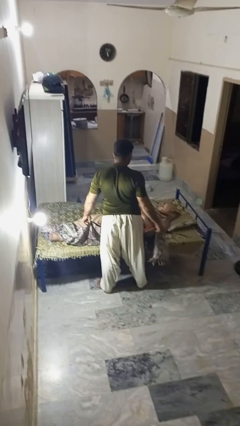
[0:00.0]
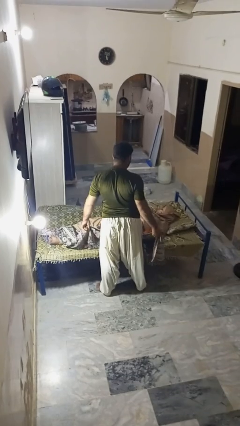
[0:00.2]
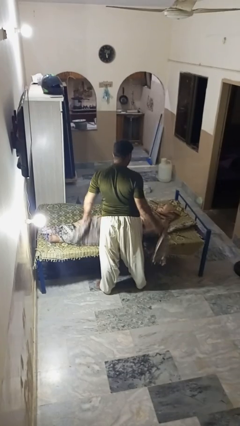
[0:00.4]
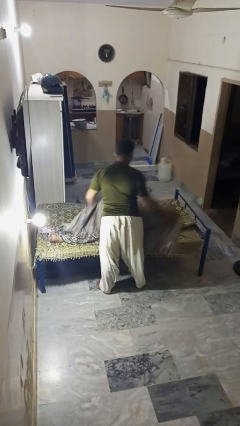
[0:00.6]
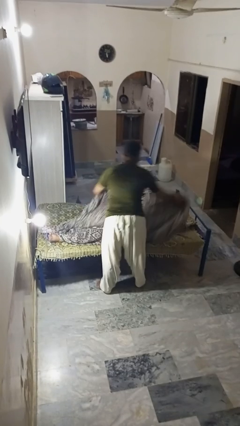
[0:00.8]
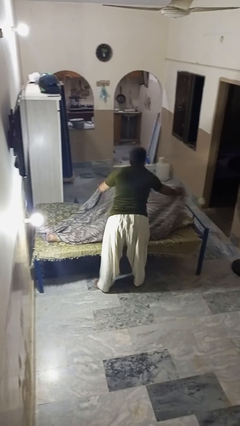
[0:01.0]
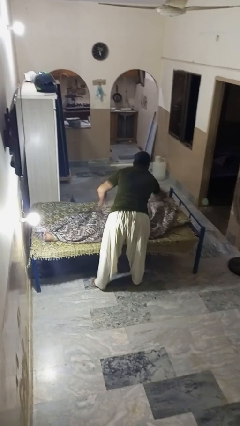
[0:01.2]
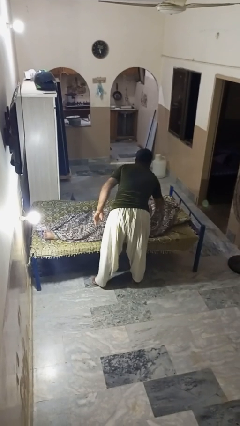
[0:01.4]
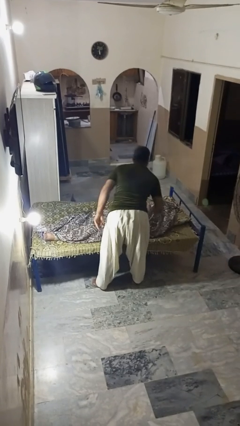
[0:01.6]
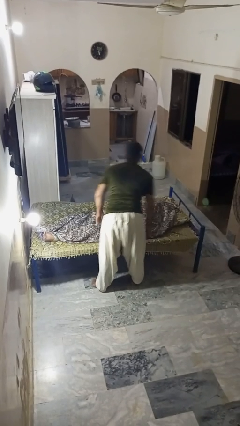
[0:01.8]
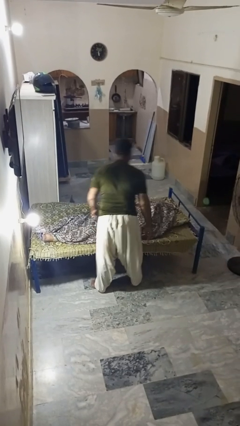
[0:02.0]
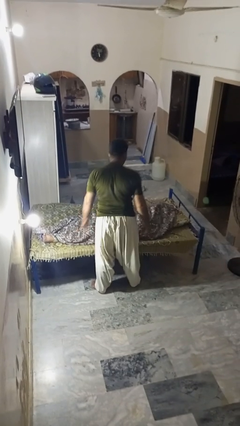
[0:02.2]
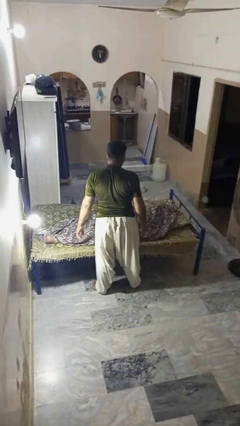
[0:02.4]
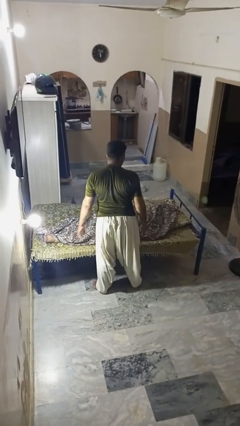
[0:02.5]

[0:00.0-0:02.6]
person covers friend with blanket

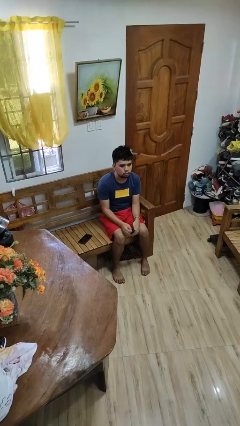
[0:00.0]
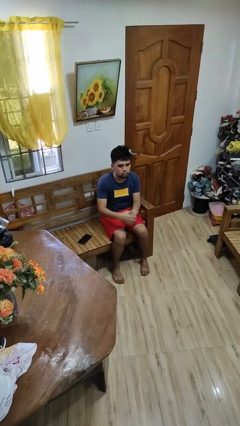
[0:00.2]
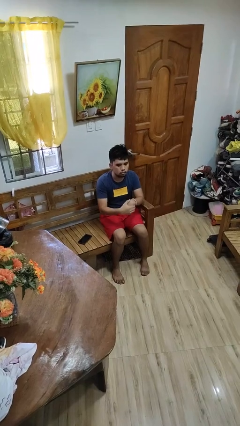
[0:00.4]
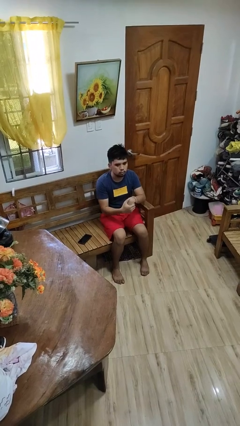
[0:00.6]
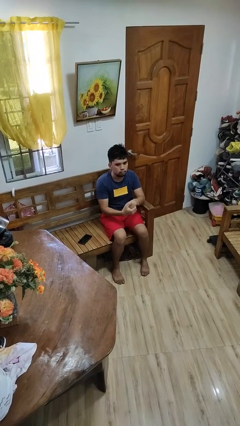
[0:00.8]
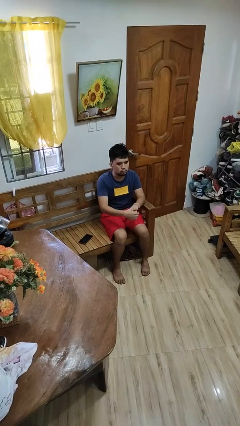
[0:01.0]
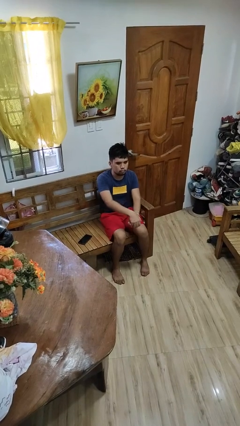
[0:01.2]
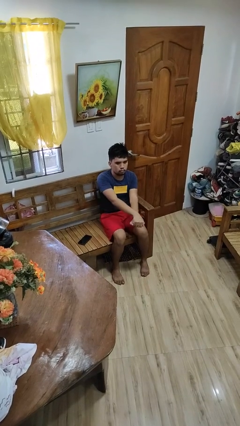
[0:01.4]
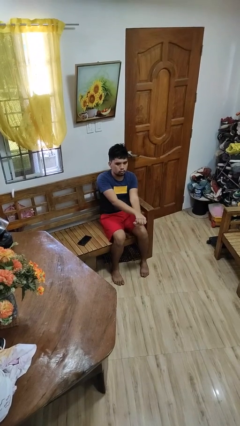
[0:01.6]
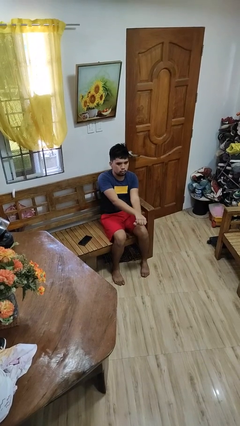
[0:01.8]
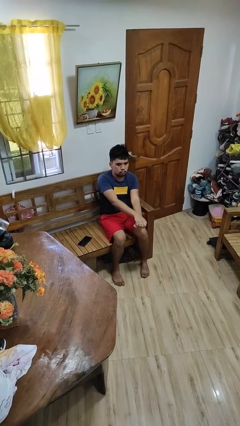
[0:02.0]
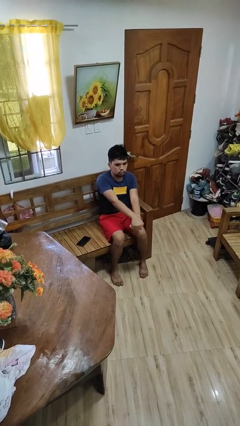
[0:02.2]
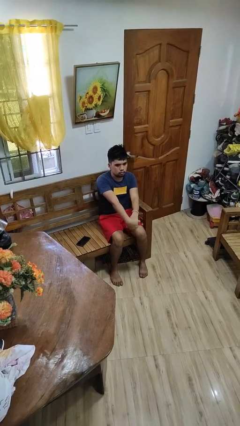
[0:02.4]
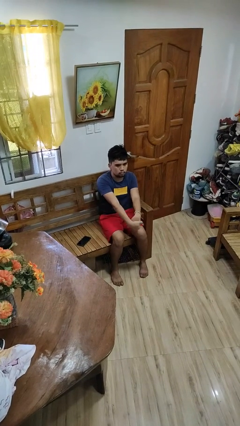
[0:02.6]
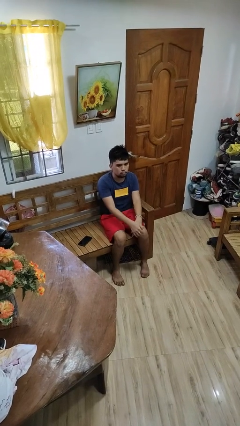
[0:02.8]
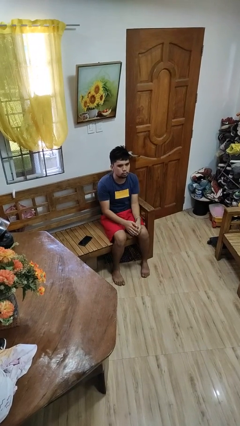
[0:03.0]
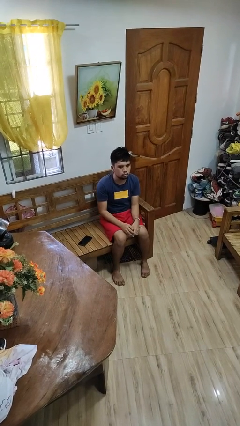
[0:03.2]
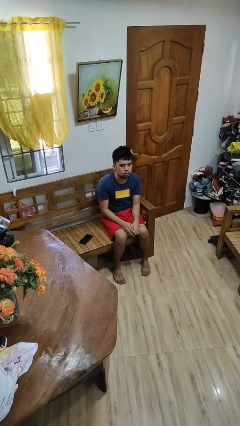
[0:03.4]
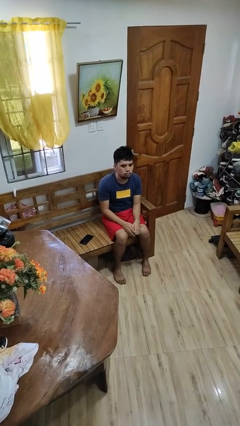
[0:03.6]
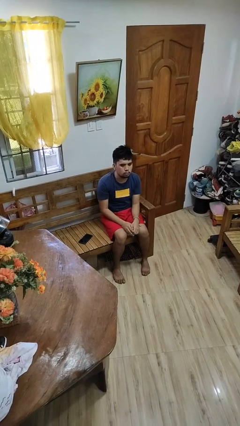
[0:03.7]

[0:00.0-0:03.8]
person cracks knuckles

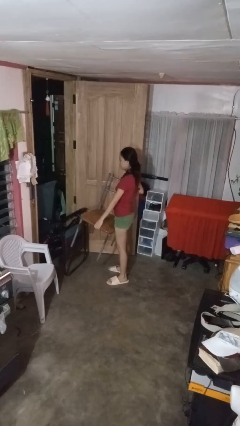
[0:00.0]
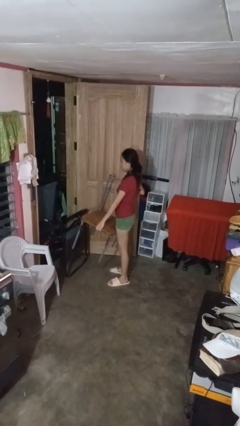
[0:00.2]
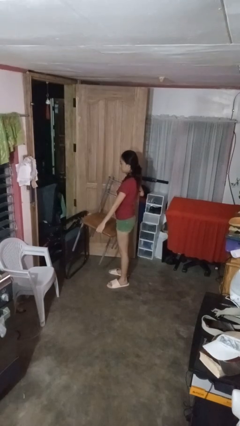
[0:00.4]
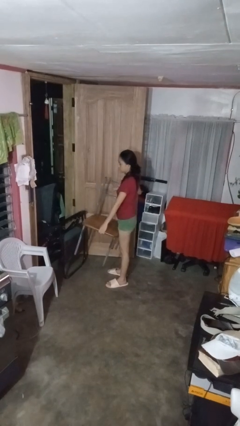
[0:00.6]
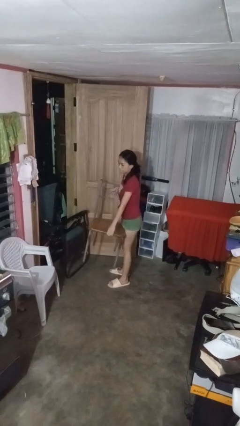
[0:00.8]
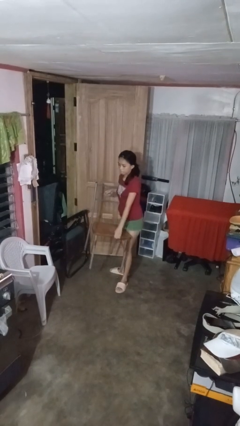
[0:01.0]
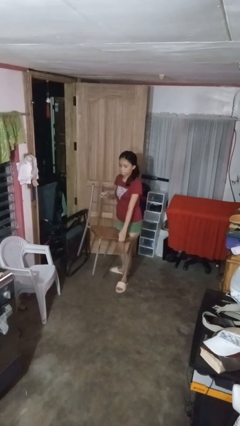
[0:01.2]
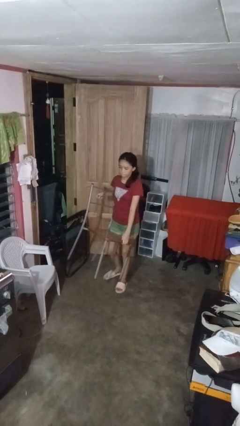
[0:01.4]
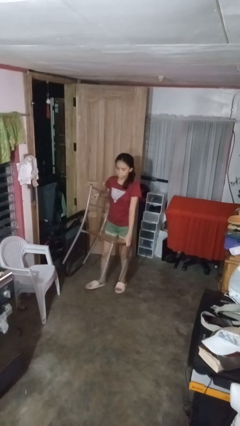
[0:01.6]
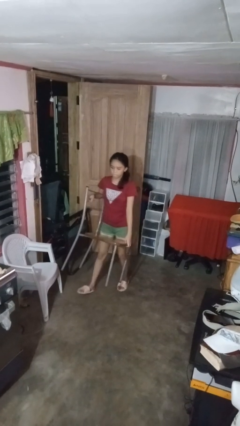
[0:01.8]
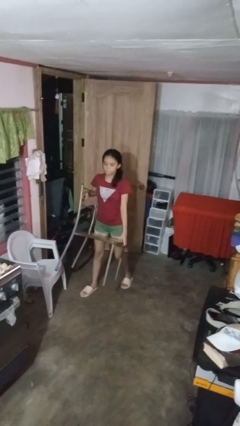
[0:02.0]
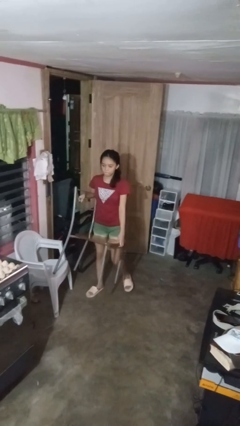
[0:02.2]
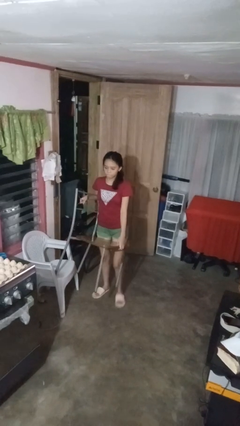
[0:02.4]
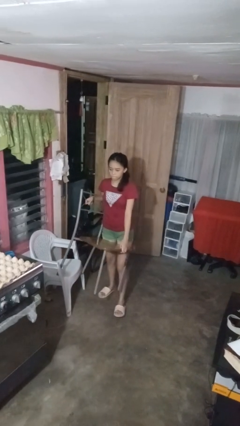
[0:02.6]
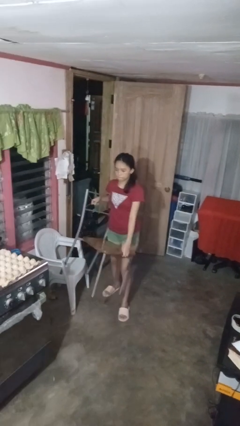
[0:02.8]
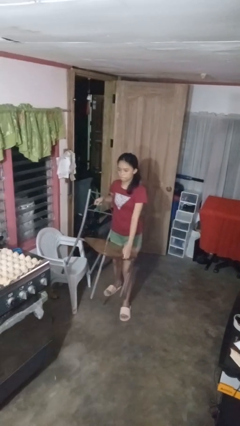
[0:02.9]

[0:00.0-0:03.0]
person carries furniture

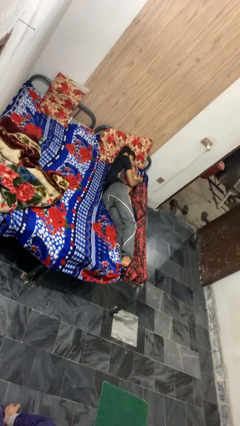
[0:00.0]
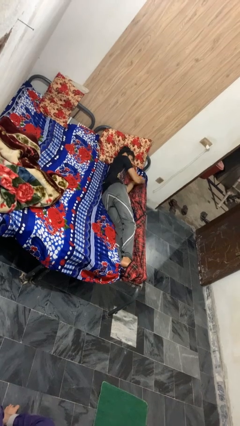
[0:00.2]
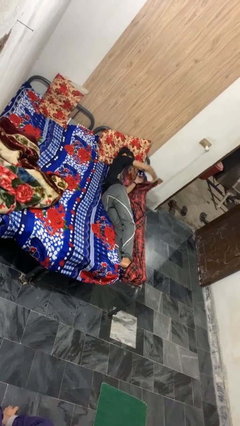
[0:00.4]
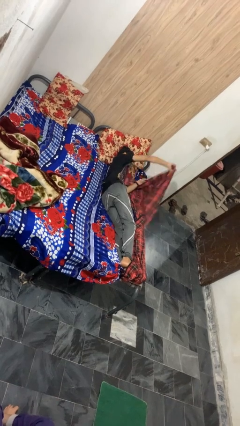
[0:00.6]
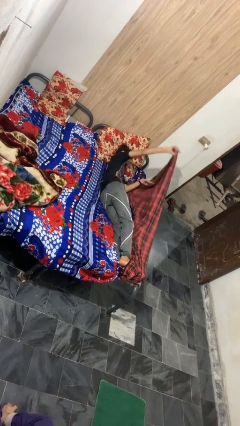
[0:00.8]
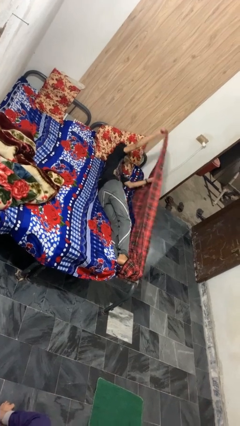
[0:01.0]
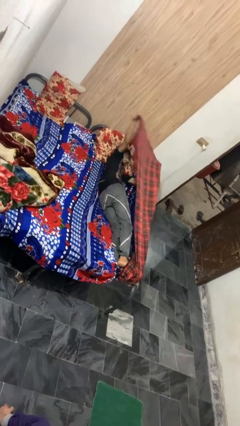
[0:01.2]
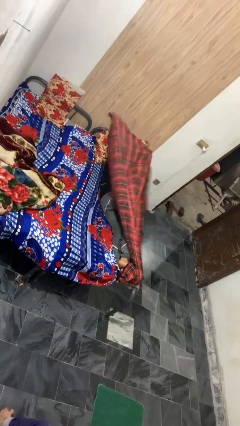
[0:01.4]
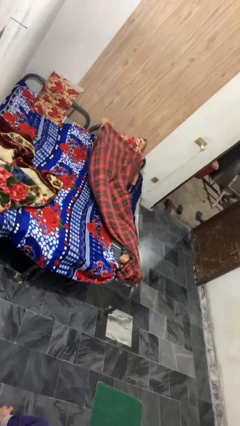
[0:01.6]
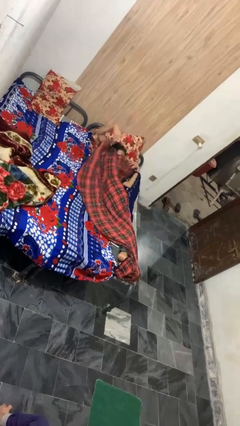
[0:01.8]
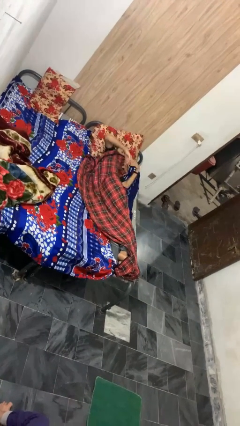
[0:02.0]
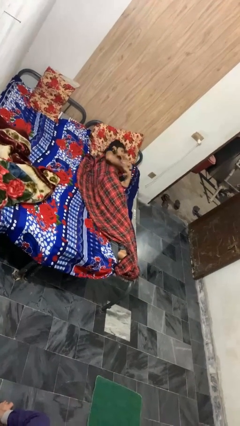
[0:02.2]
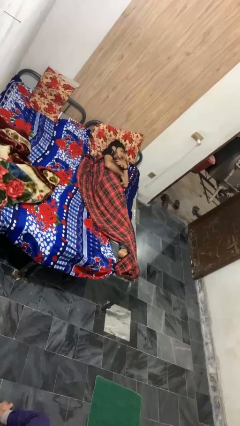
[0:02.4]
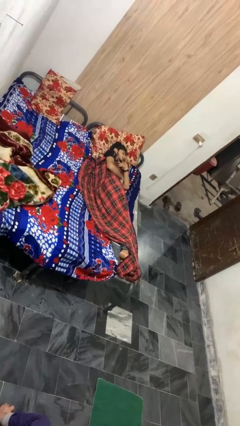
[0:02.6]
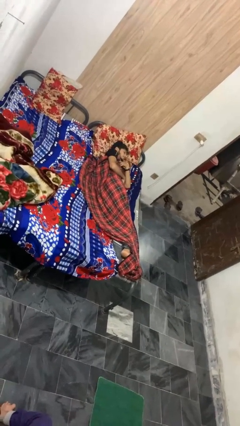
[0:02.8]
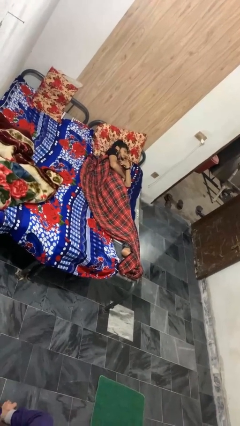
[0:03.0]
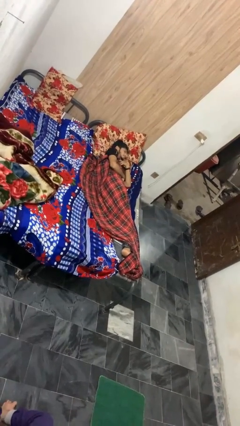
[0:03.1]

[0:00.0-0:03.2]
person covers with blanket

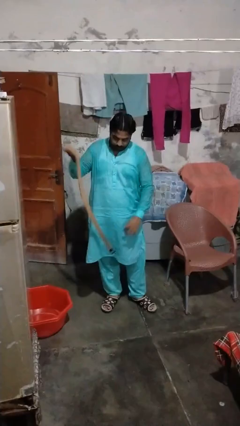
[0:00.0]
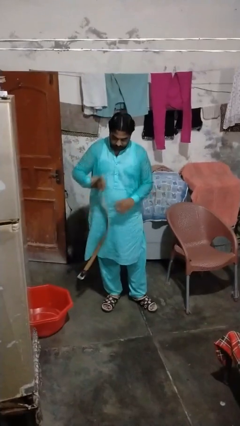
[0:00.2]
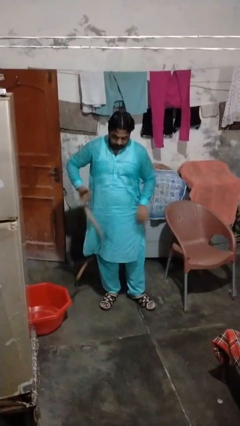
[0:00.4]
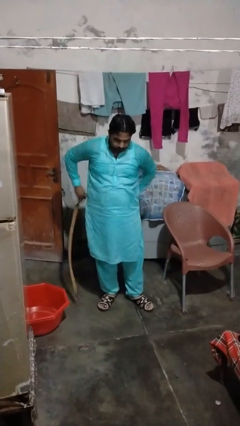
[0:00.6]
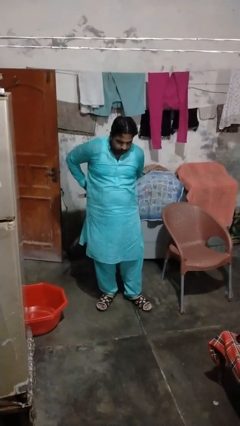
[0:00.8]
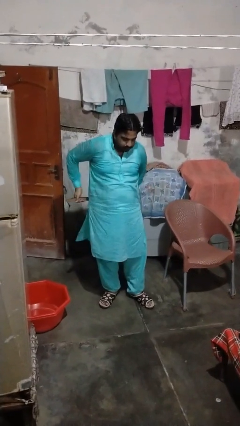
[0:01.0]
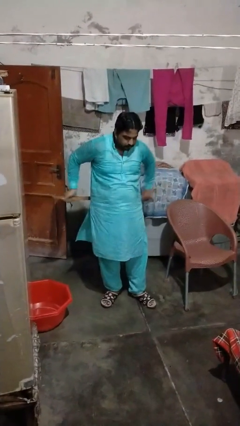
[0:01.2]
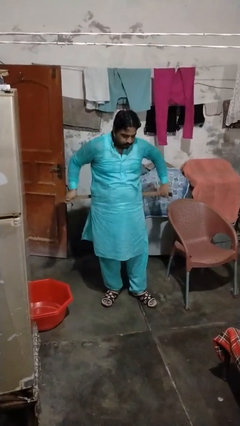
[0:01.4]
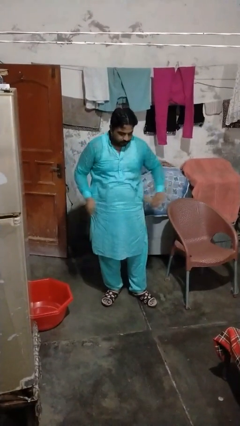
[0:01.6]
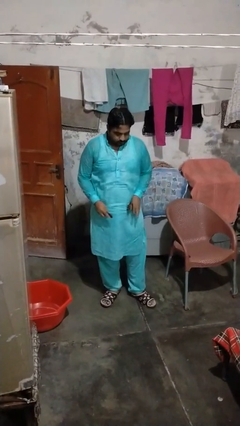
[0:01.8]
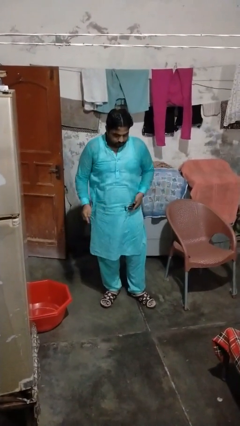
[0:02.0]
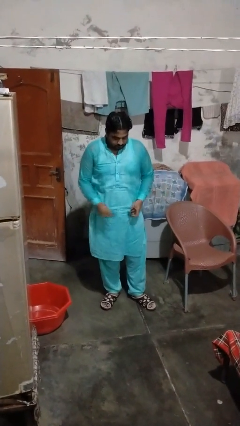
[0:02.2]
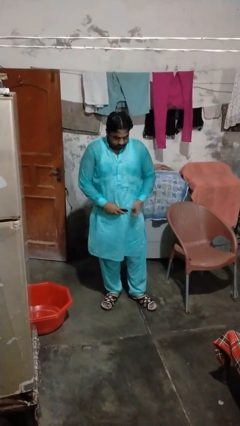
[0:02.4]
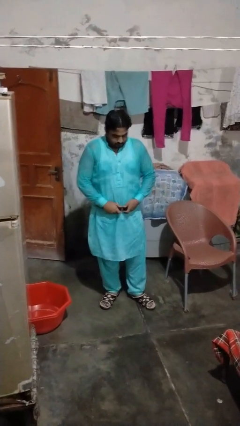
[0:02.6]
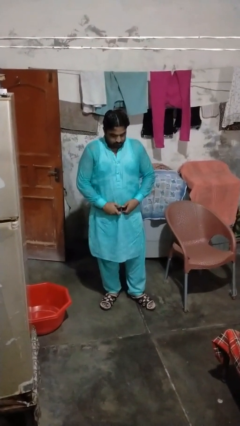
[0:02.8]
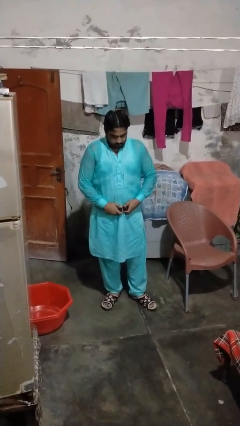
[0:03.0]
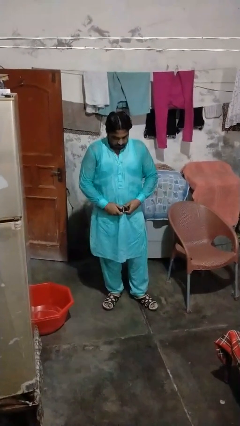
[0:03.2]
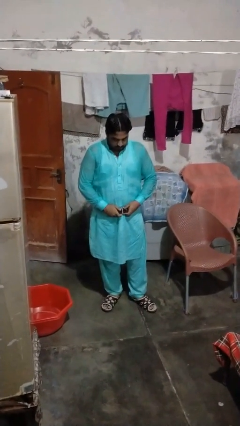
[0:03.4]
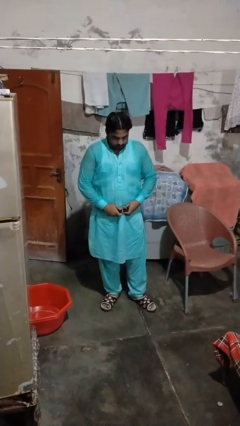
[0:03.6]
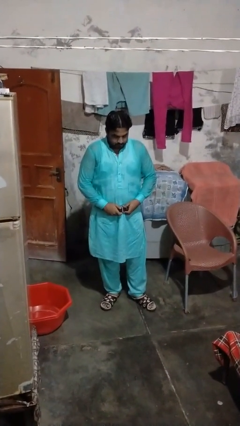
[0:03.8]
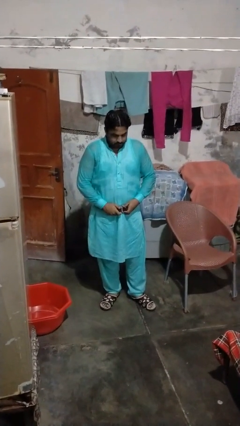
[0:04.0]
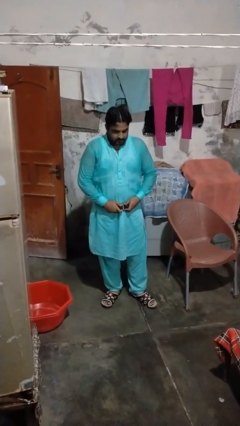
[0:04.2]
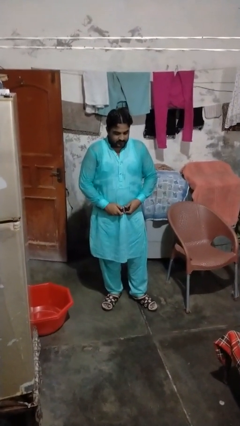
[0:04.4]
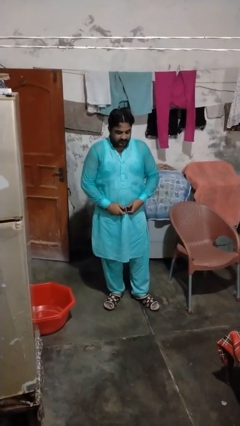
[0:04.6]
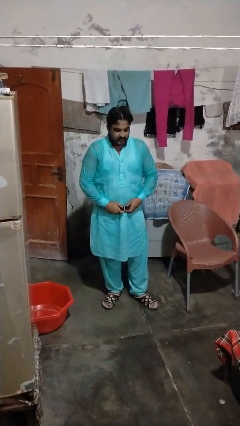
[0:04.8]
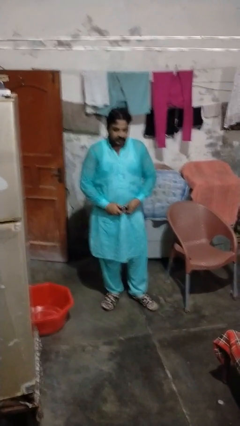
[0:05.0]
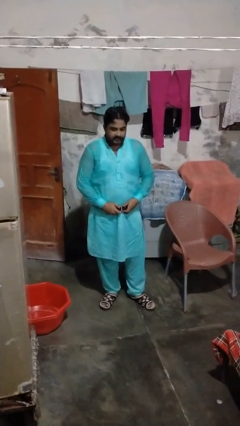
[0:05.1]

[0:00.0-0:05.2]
person puts on belt

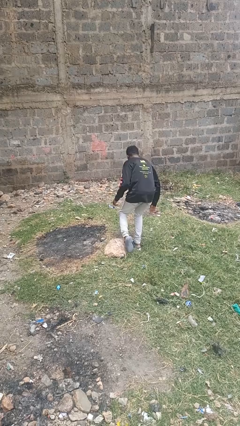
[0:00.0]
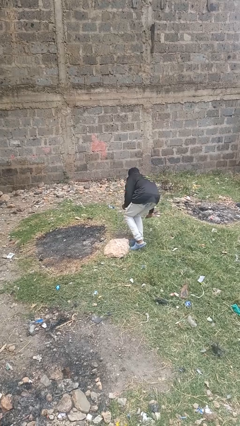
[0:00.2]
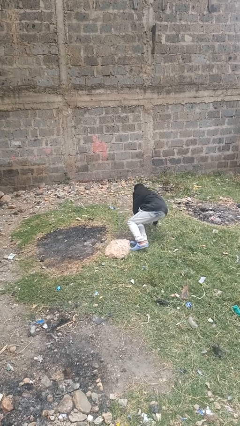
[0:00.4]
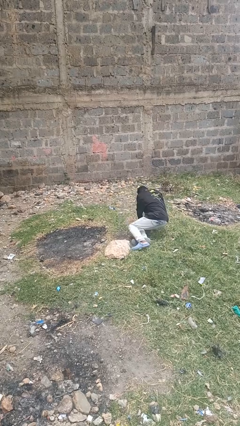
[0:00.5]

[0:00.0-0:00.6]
person trips on object on floor
